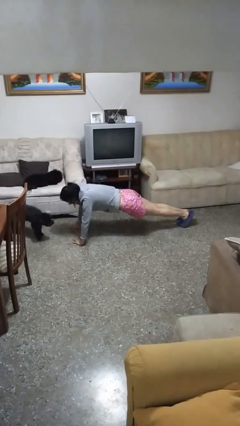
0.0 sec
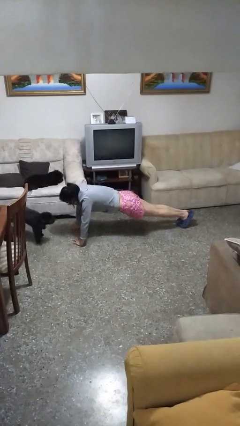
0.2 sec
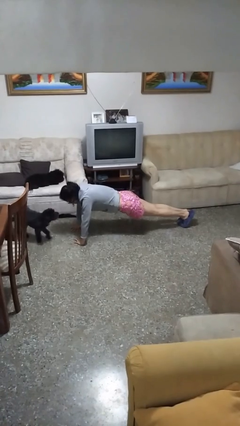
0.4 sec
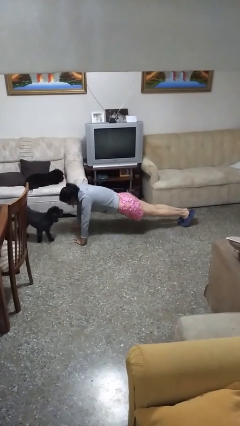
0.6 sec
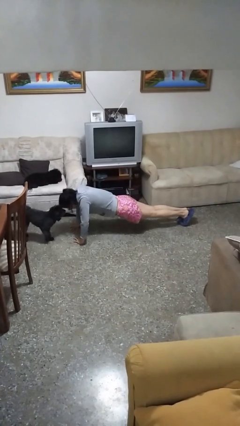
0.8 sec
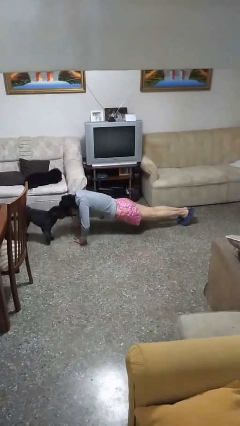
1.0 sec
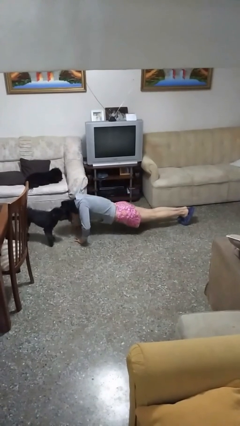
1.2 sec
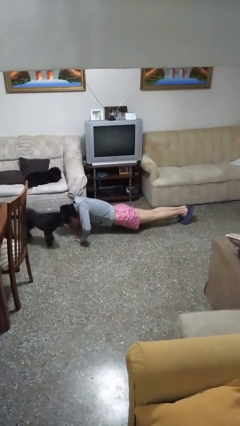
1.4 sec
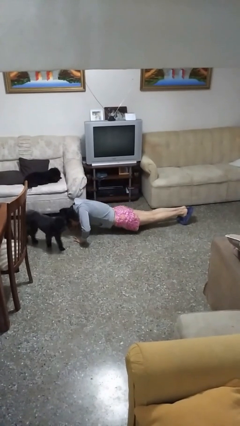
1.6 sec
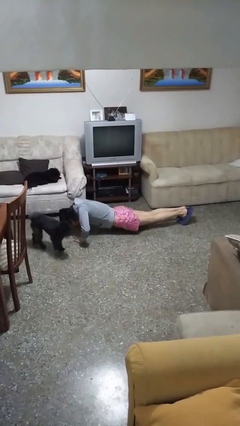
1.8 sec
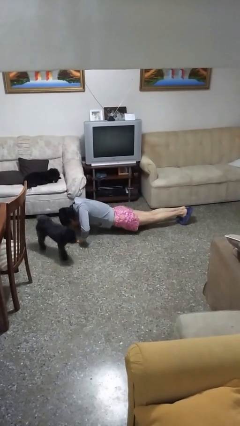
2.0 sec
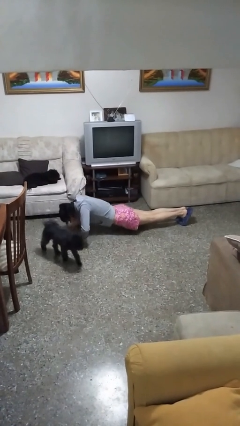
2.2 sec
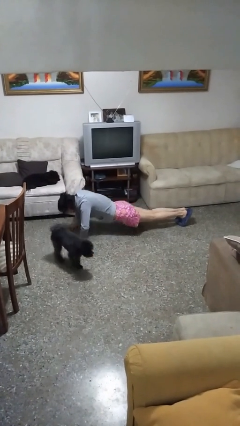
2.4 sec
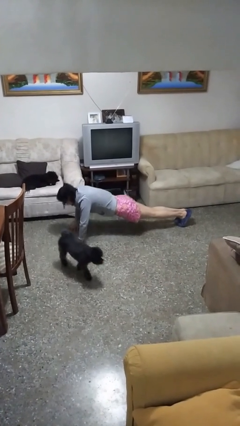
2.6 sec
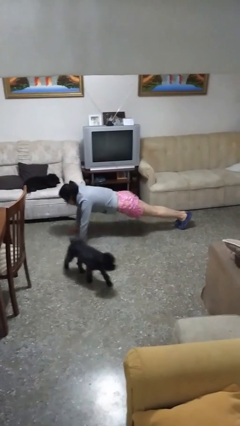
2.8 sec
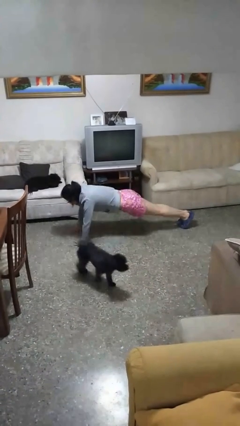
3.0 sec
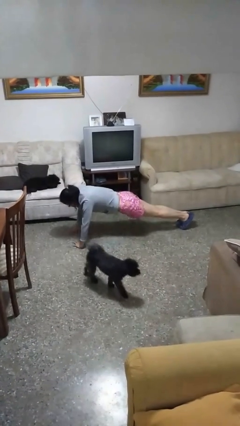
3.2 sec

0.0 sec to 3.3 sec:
person exercises with pushup

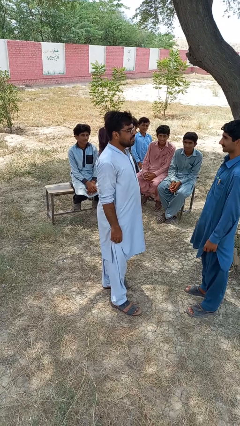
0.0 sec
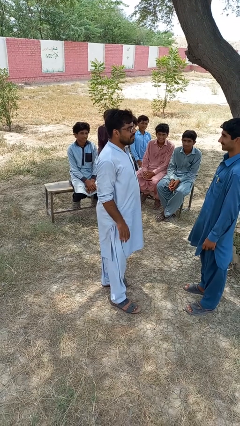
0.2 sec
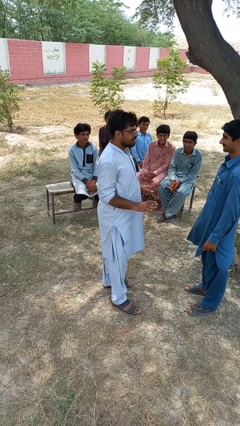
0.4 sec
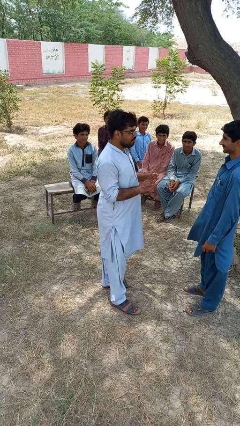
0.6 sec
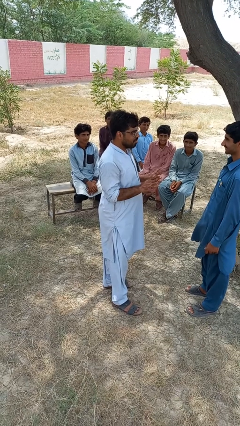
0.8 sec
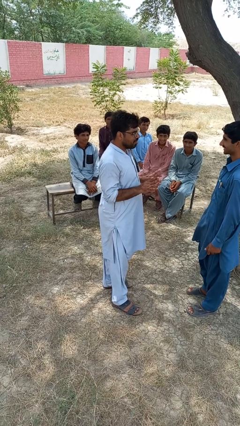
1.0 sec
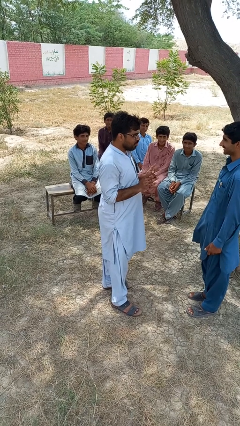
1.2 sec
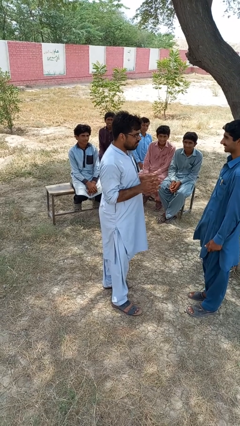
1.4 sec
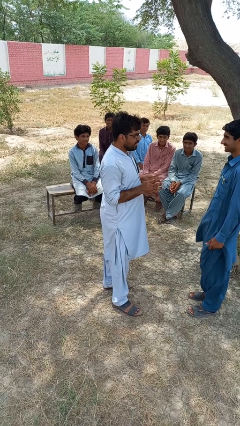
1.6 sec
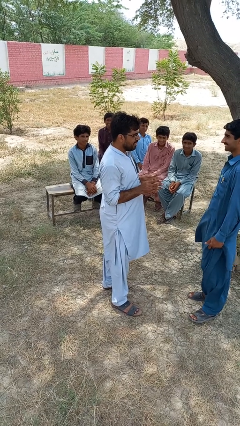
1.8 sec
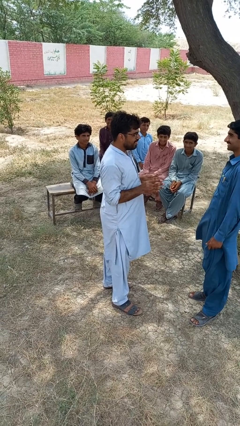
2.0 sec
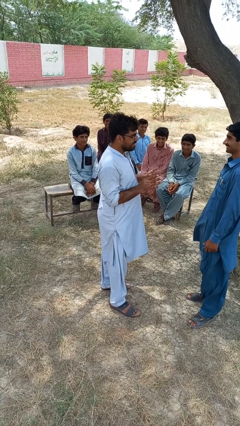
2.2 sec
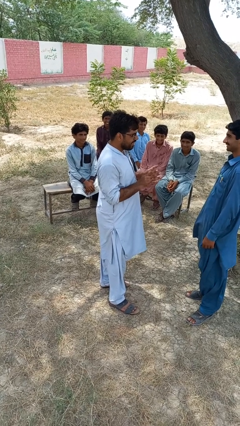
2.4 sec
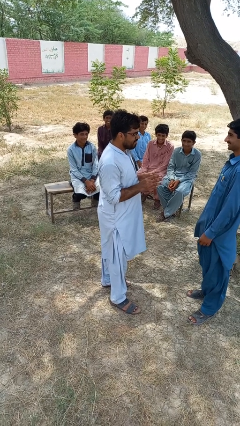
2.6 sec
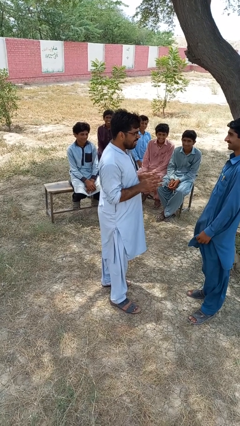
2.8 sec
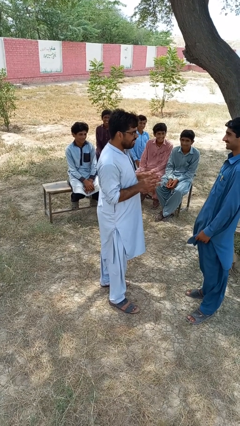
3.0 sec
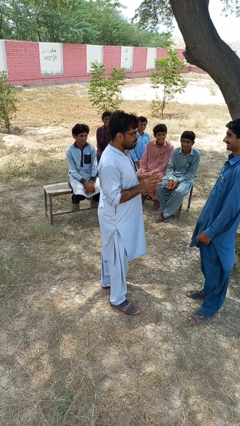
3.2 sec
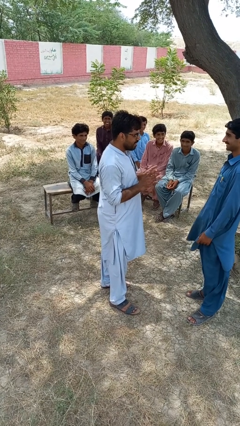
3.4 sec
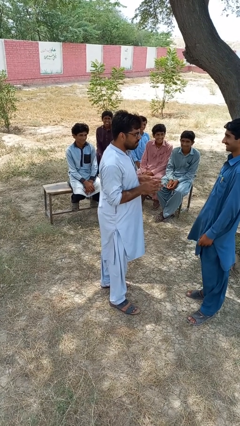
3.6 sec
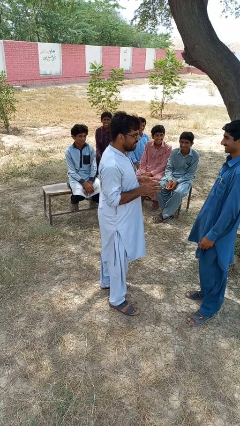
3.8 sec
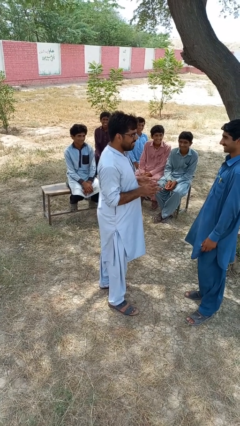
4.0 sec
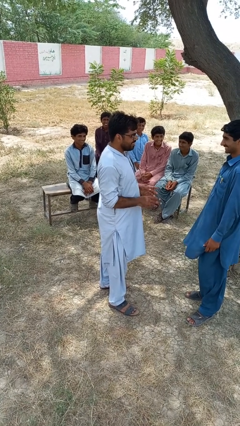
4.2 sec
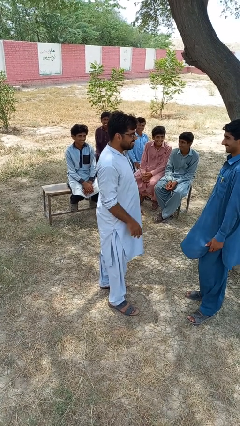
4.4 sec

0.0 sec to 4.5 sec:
person talks to person

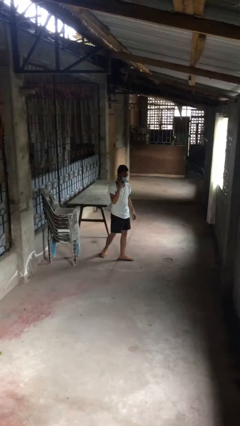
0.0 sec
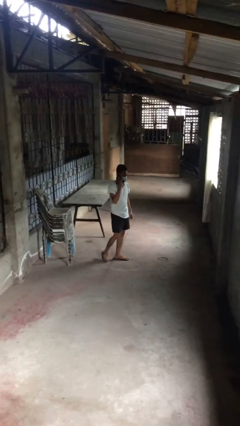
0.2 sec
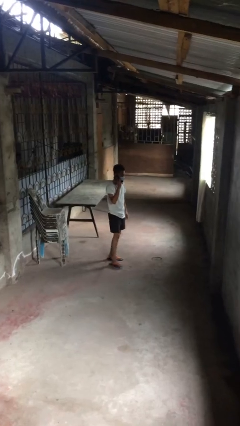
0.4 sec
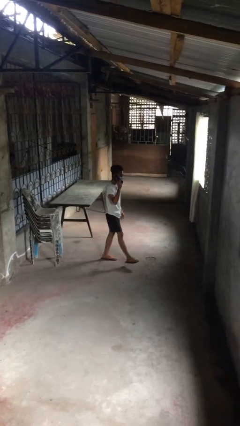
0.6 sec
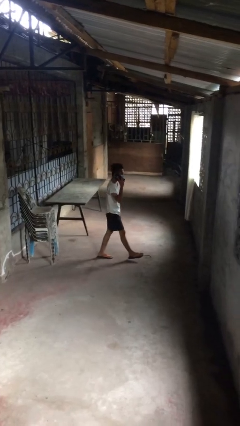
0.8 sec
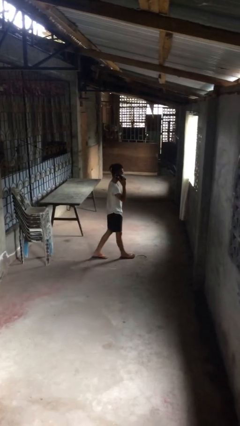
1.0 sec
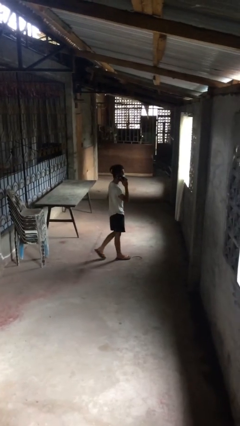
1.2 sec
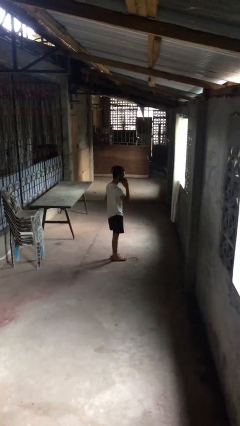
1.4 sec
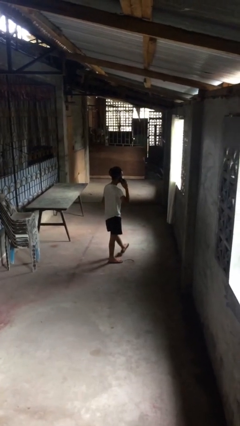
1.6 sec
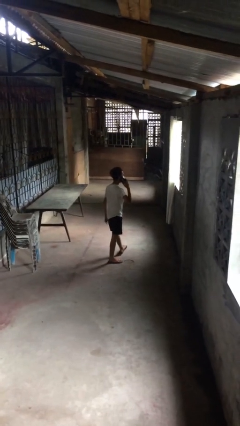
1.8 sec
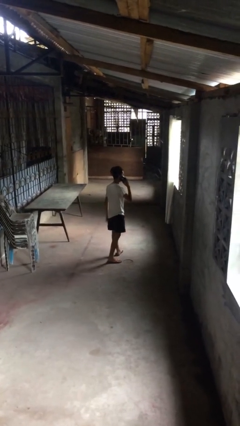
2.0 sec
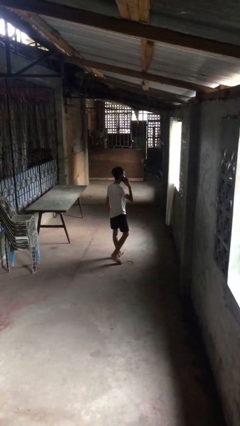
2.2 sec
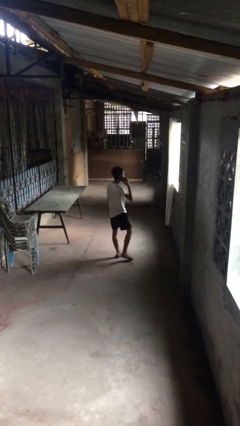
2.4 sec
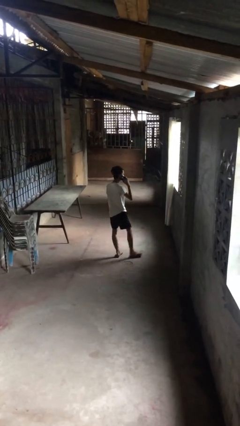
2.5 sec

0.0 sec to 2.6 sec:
person talks on phone

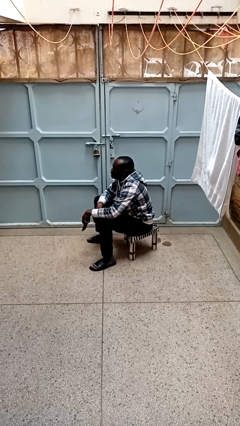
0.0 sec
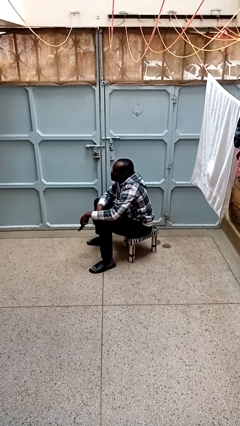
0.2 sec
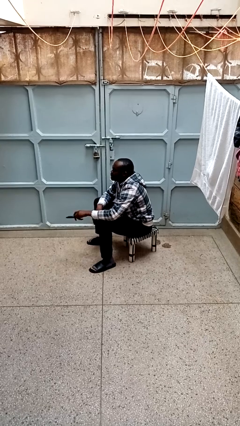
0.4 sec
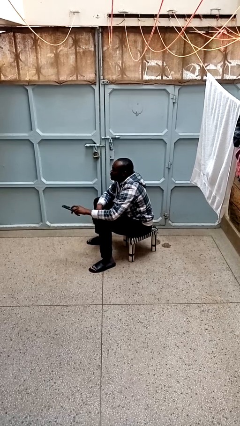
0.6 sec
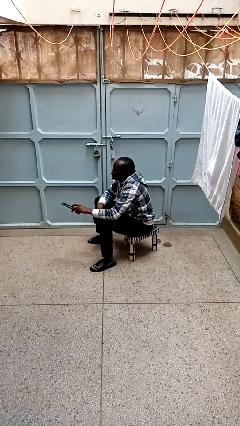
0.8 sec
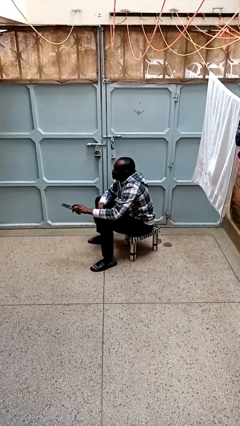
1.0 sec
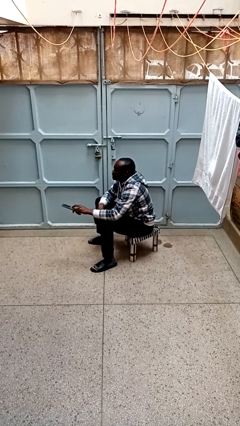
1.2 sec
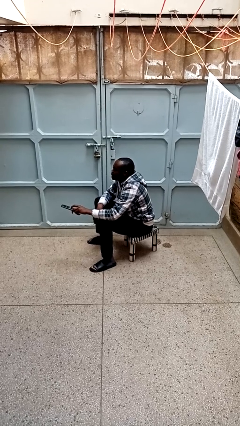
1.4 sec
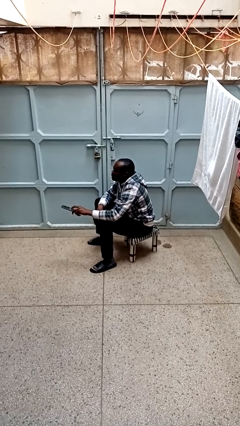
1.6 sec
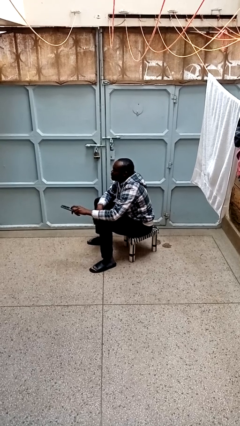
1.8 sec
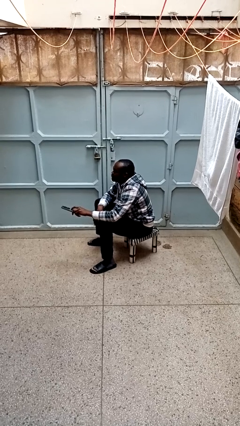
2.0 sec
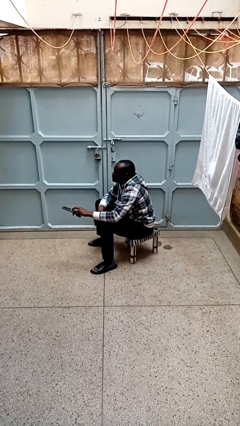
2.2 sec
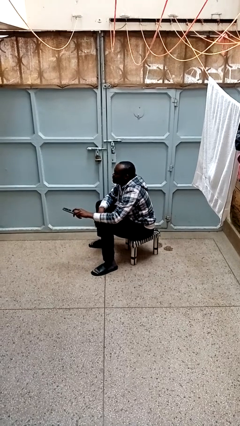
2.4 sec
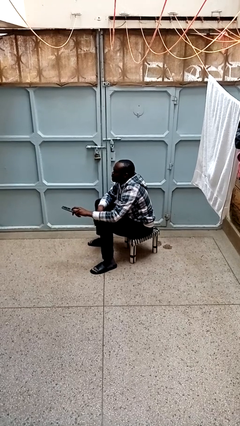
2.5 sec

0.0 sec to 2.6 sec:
person uses television remote

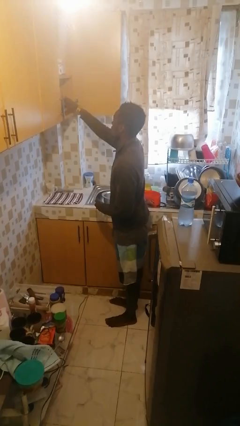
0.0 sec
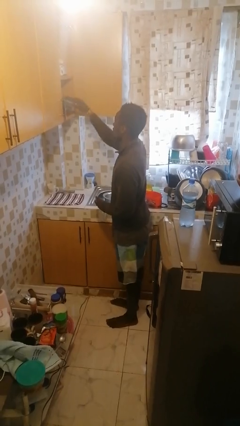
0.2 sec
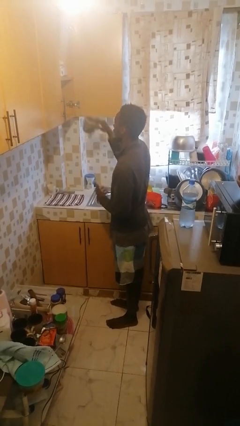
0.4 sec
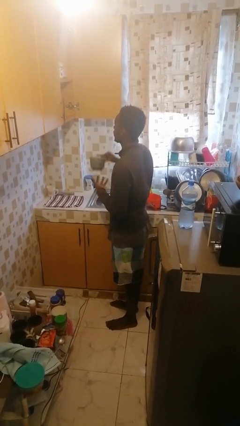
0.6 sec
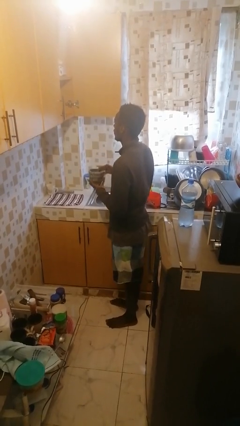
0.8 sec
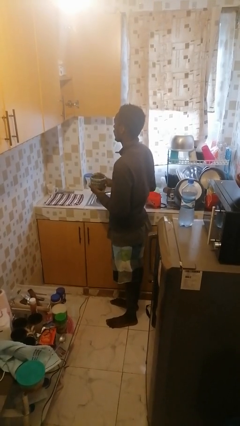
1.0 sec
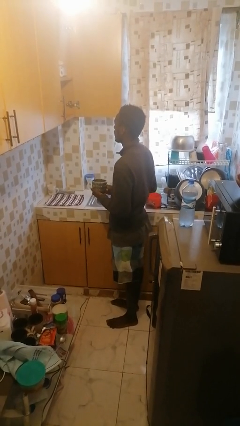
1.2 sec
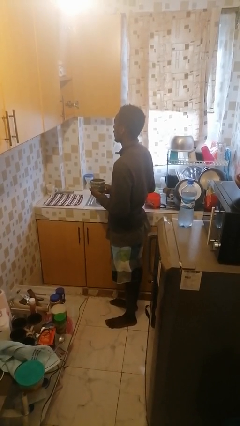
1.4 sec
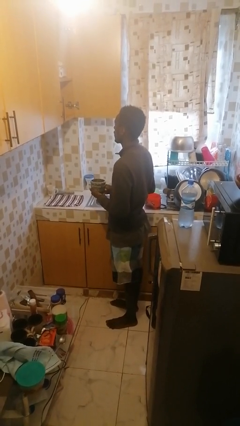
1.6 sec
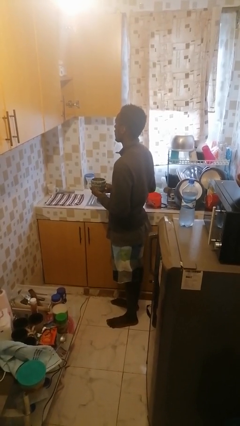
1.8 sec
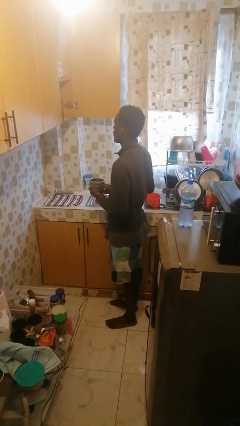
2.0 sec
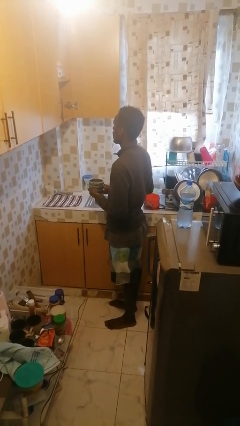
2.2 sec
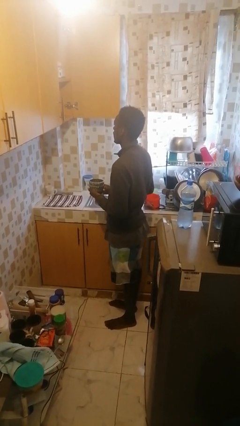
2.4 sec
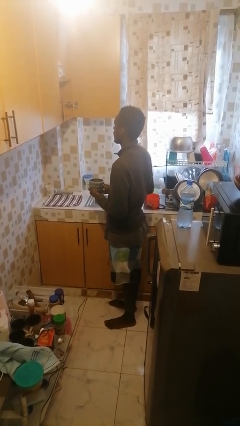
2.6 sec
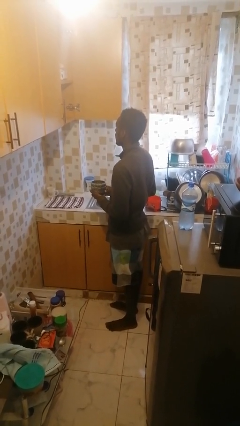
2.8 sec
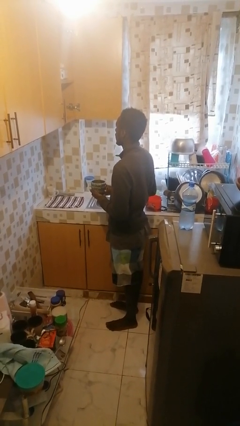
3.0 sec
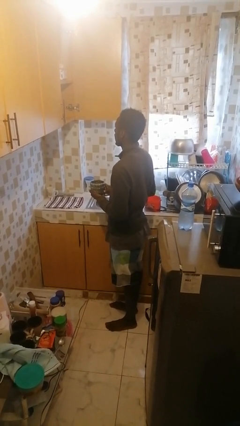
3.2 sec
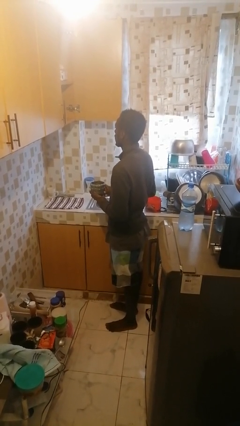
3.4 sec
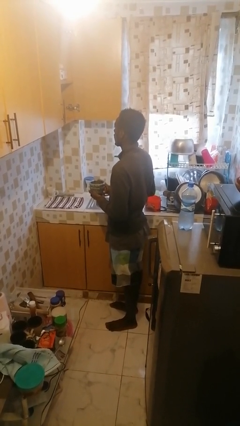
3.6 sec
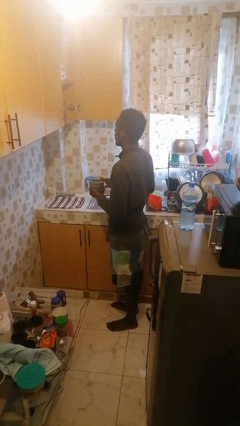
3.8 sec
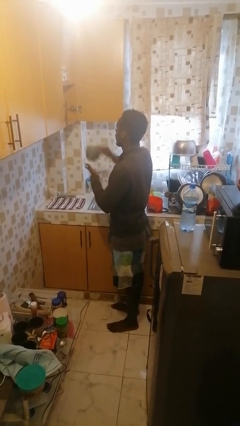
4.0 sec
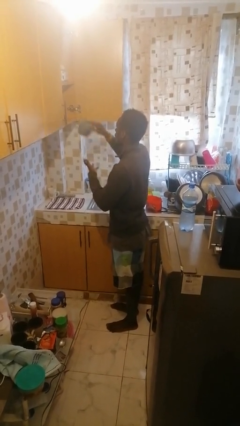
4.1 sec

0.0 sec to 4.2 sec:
person picks up object from cabinet

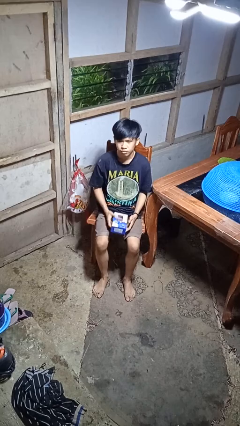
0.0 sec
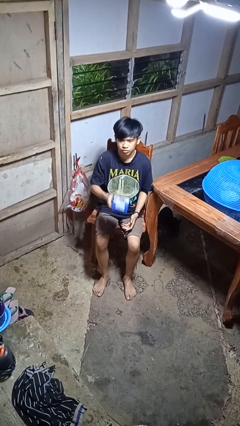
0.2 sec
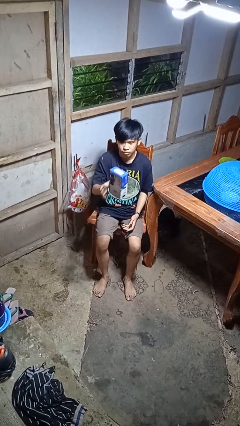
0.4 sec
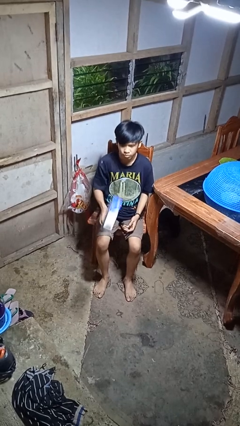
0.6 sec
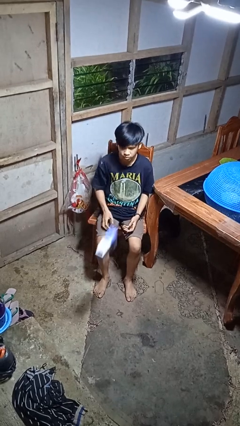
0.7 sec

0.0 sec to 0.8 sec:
person throws object into air
